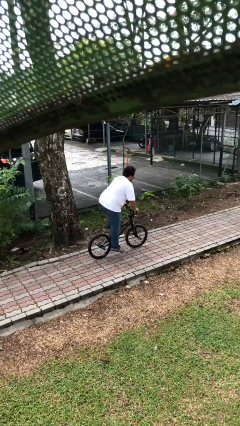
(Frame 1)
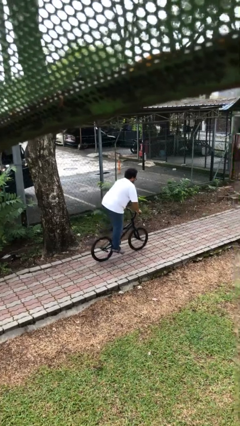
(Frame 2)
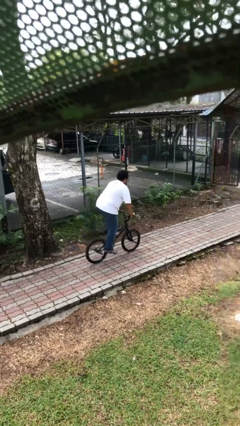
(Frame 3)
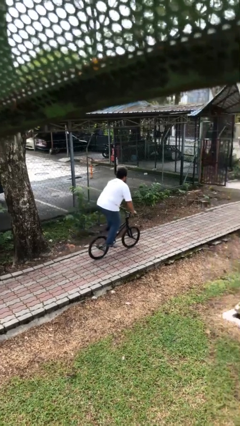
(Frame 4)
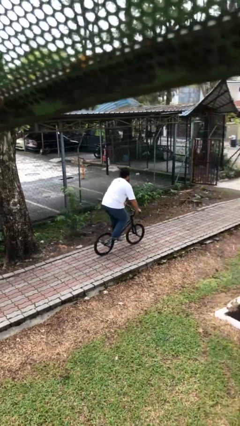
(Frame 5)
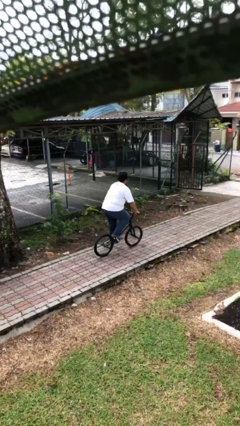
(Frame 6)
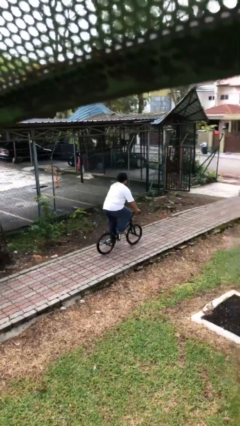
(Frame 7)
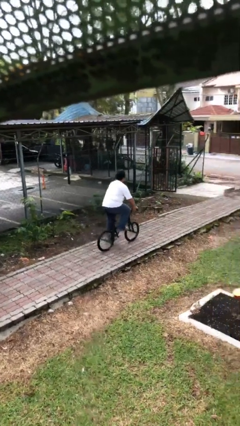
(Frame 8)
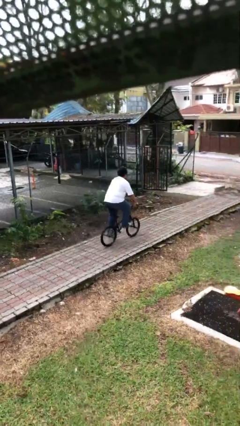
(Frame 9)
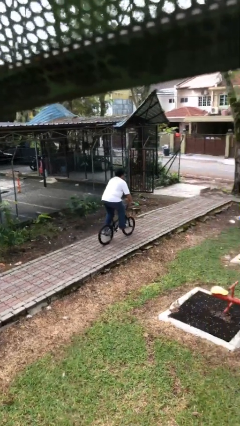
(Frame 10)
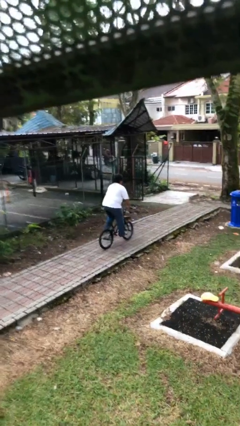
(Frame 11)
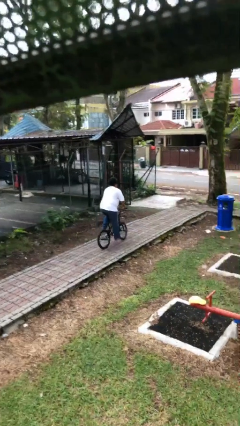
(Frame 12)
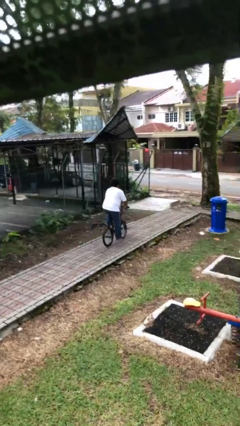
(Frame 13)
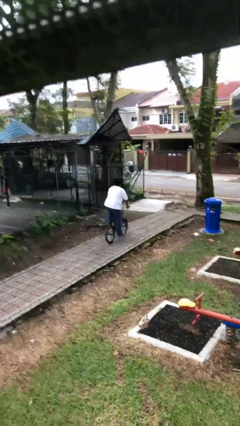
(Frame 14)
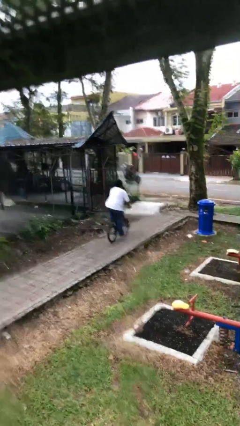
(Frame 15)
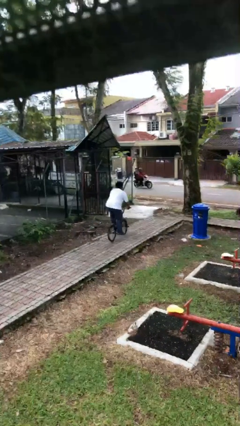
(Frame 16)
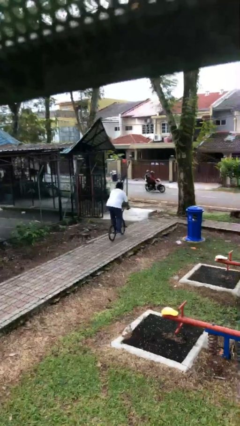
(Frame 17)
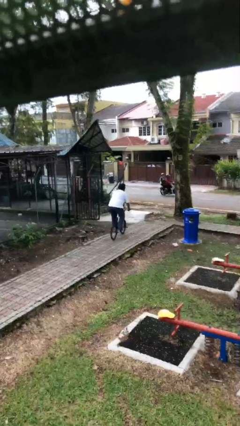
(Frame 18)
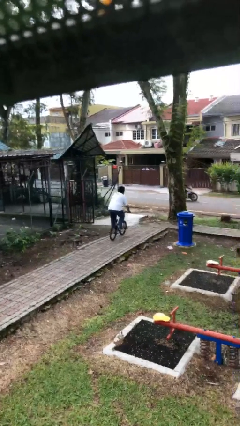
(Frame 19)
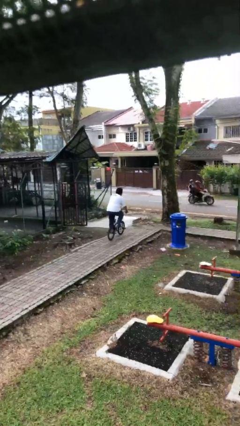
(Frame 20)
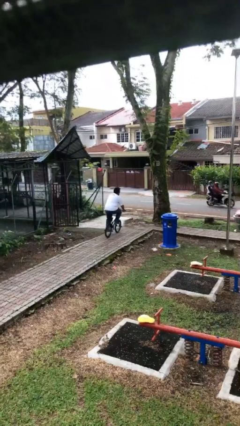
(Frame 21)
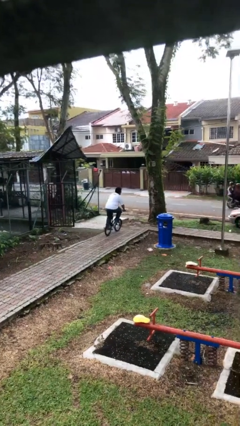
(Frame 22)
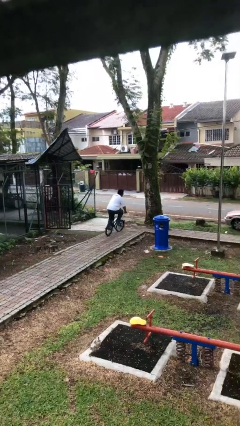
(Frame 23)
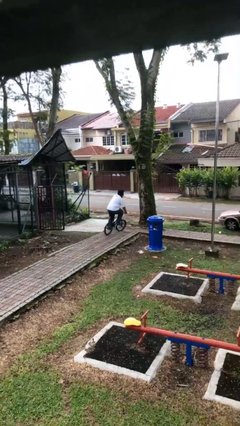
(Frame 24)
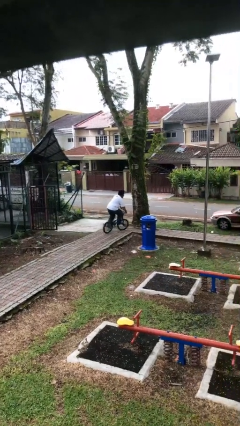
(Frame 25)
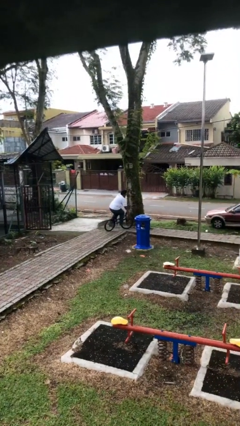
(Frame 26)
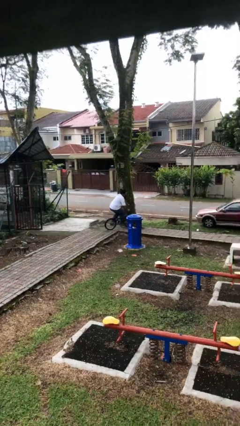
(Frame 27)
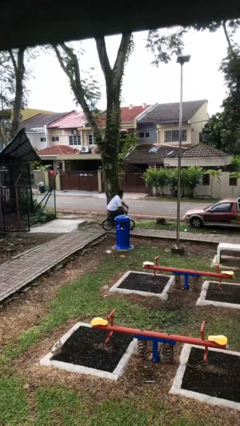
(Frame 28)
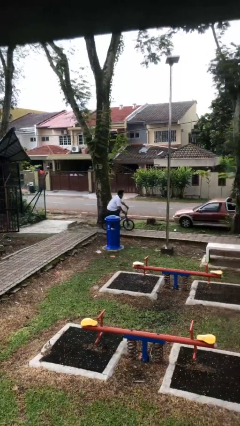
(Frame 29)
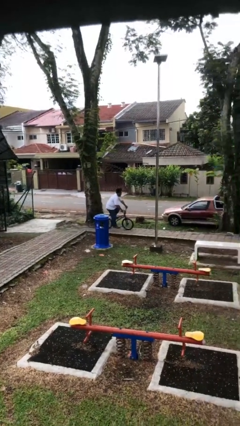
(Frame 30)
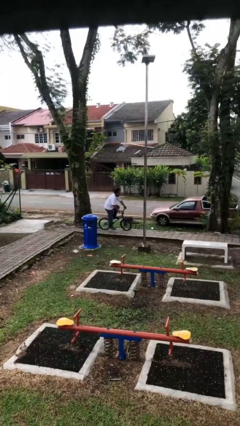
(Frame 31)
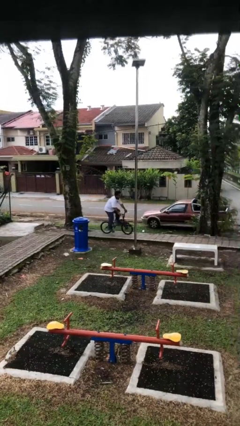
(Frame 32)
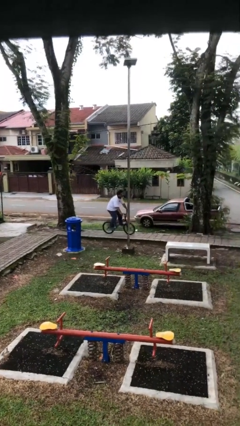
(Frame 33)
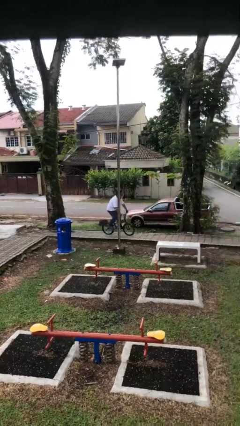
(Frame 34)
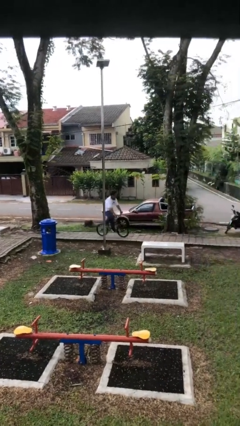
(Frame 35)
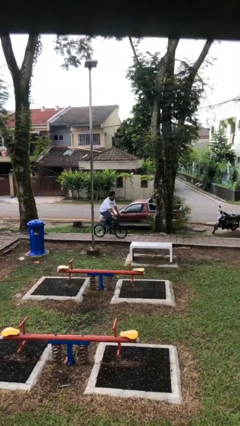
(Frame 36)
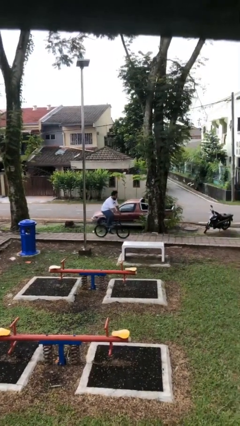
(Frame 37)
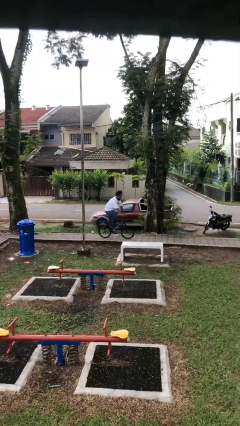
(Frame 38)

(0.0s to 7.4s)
person rides bicycle

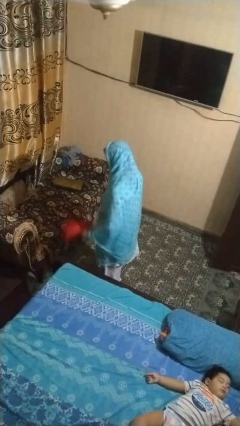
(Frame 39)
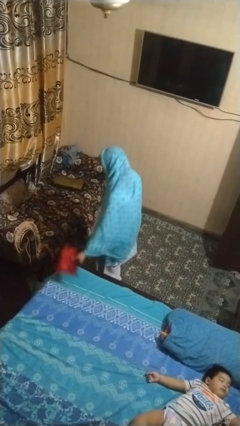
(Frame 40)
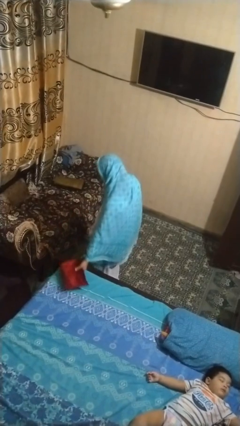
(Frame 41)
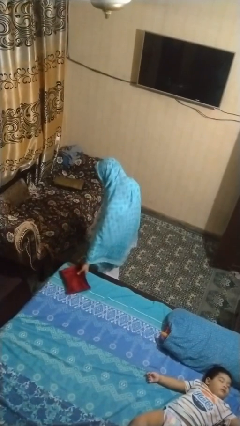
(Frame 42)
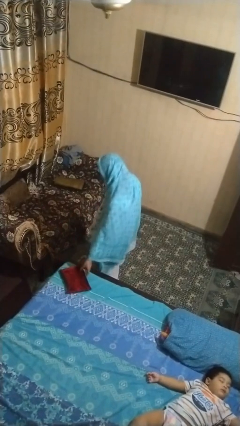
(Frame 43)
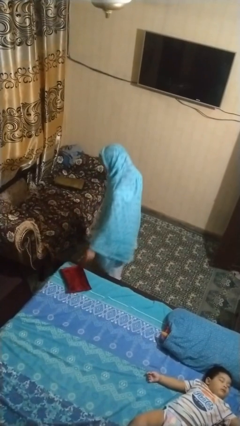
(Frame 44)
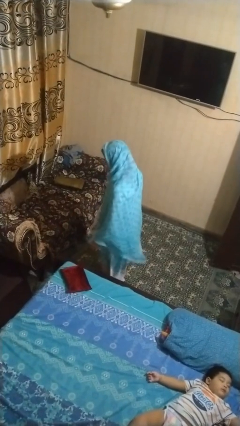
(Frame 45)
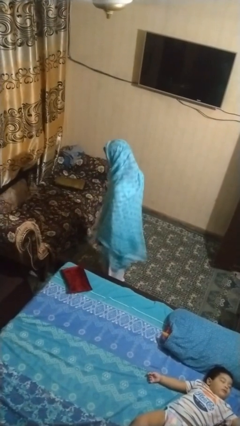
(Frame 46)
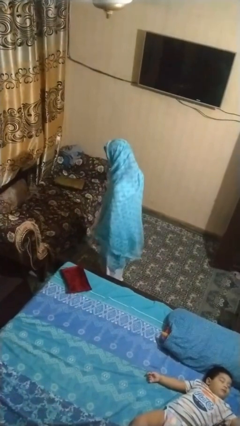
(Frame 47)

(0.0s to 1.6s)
person puts down object on bed

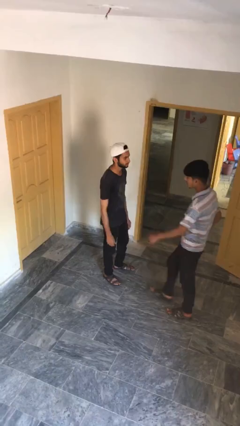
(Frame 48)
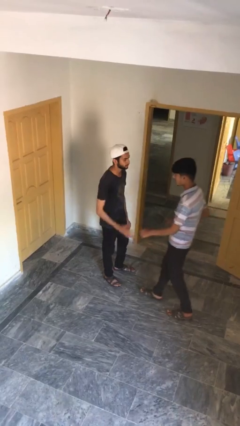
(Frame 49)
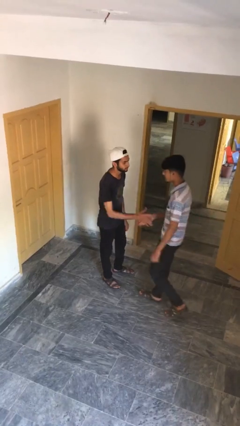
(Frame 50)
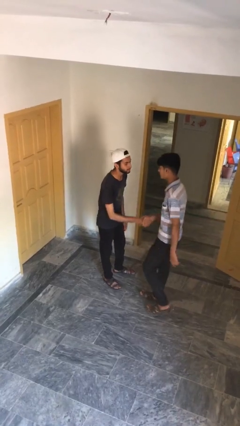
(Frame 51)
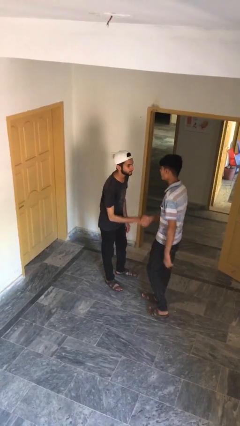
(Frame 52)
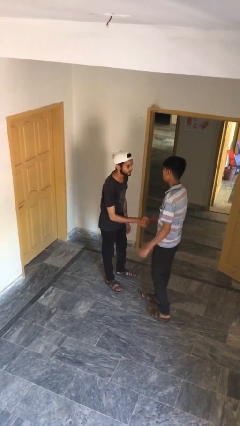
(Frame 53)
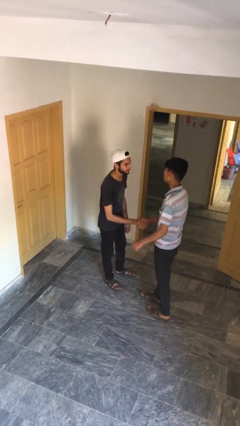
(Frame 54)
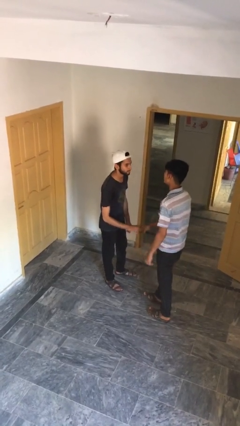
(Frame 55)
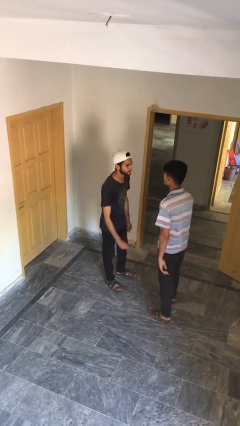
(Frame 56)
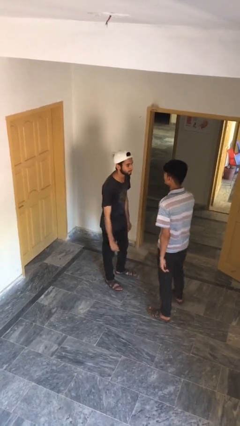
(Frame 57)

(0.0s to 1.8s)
person shakes hand

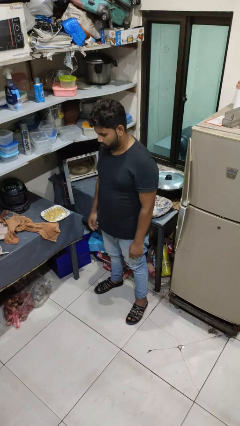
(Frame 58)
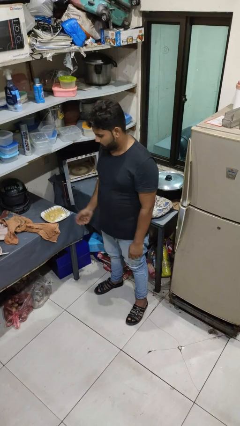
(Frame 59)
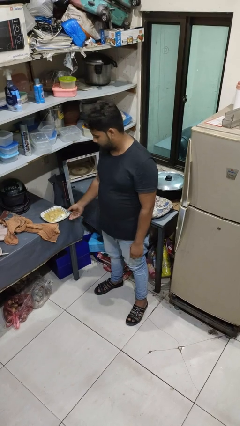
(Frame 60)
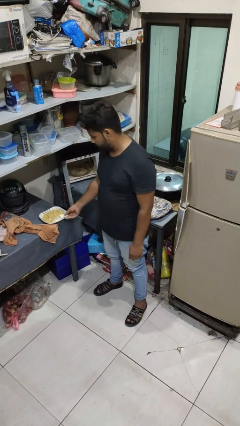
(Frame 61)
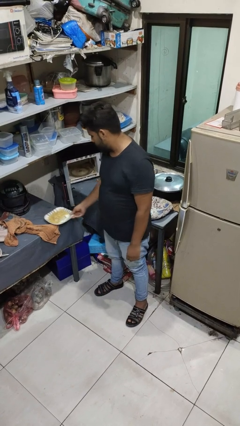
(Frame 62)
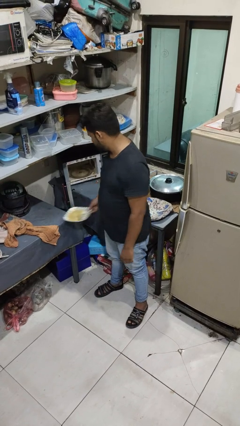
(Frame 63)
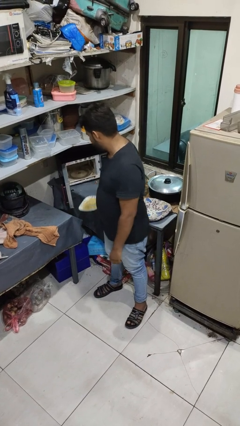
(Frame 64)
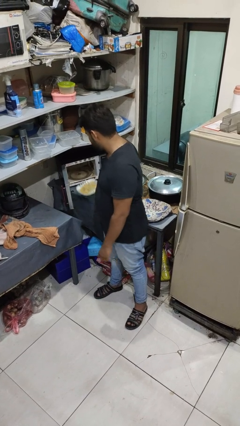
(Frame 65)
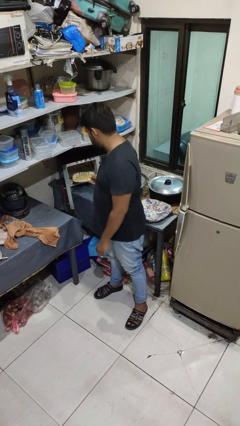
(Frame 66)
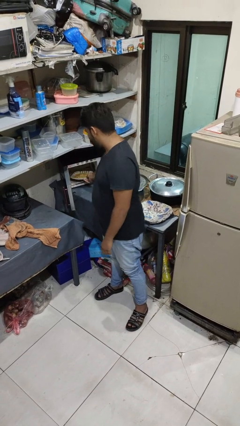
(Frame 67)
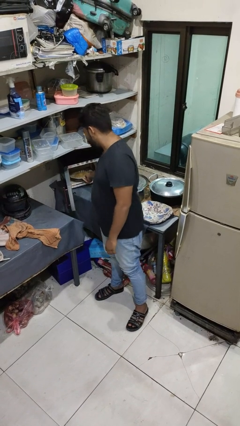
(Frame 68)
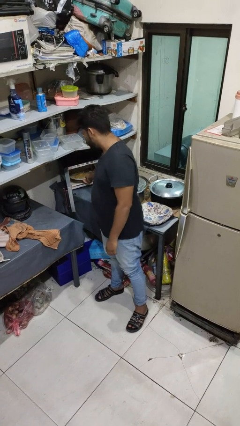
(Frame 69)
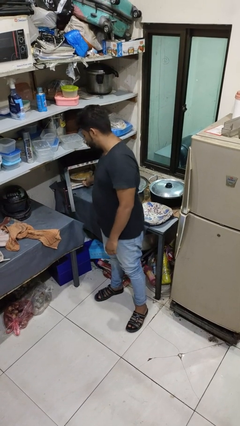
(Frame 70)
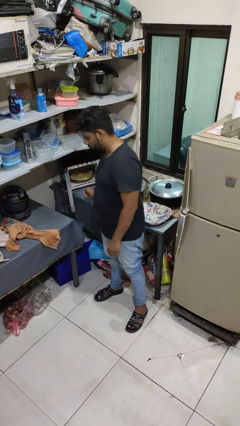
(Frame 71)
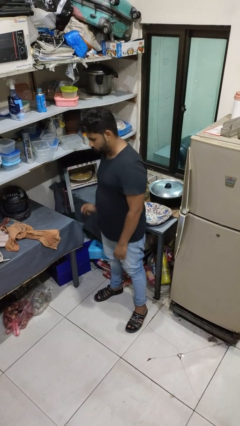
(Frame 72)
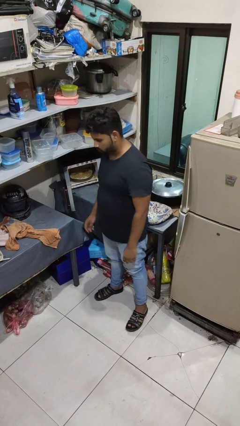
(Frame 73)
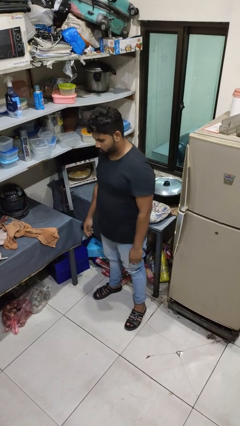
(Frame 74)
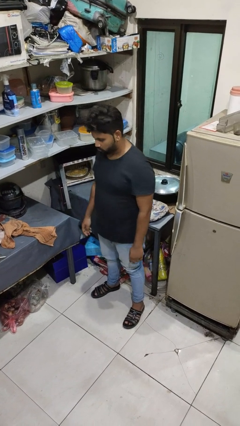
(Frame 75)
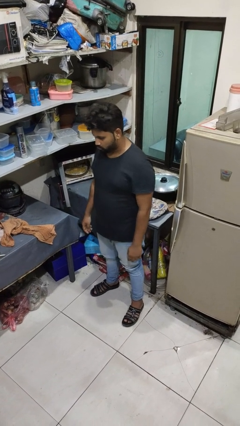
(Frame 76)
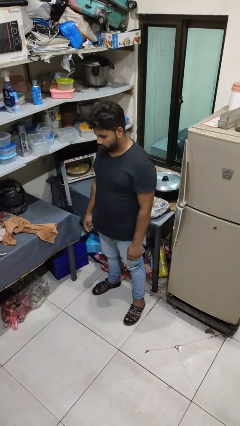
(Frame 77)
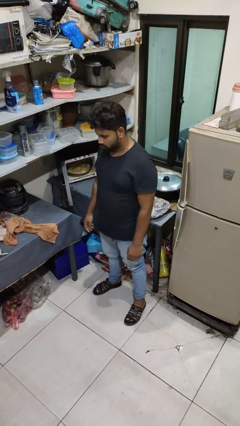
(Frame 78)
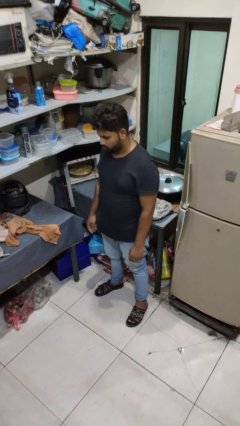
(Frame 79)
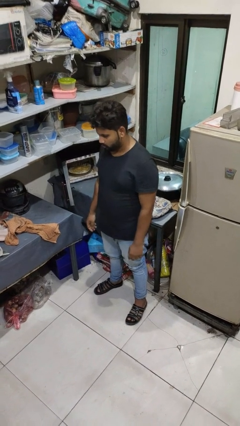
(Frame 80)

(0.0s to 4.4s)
person puts object into microwave

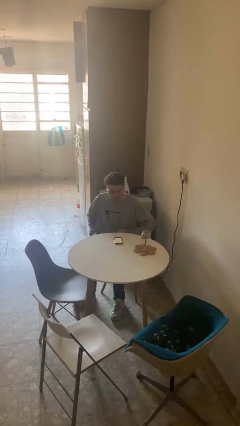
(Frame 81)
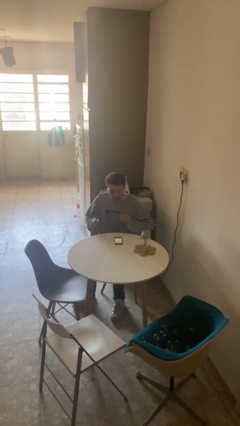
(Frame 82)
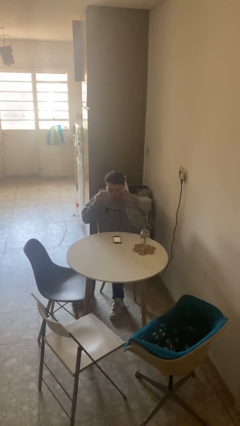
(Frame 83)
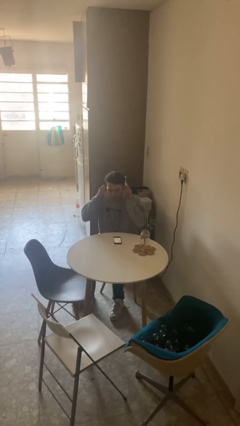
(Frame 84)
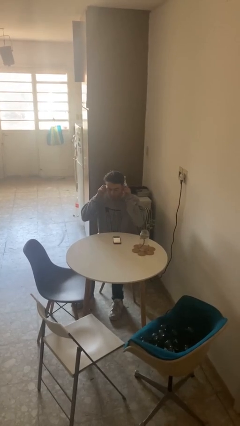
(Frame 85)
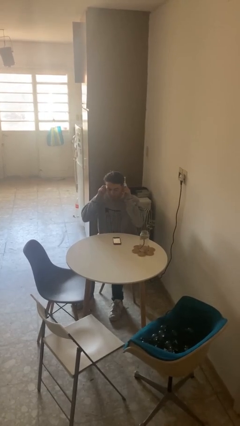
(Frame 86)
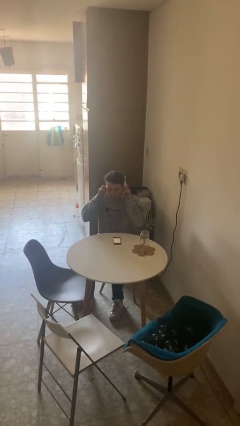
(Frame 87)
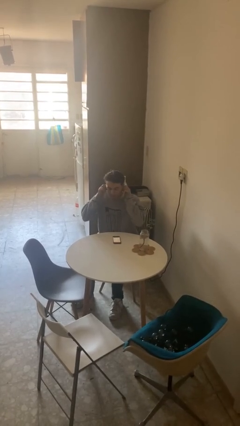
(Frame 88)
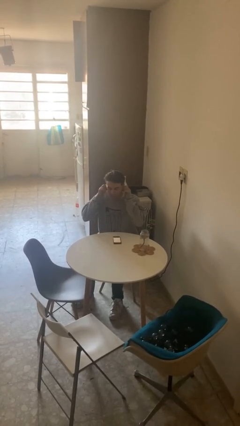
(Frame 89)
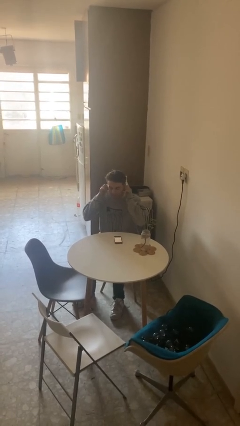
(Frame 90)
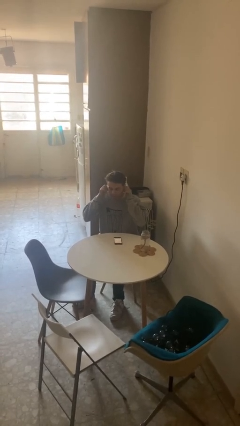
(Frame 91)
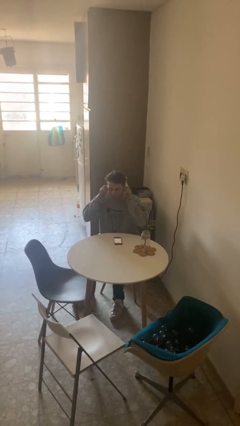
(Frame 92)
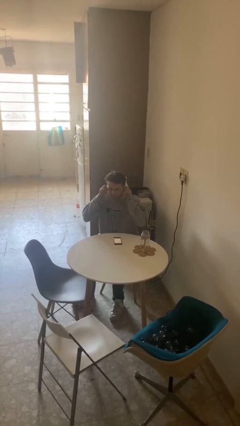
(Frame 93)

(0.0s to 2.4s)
person puts fingers in ear
